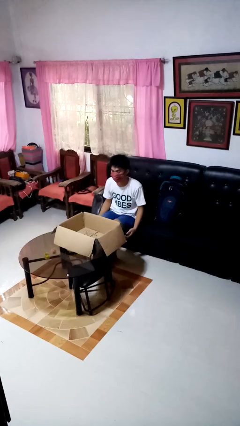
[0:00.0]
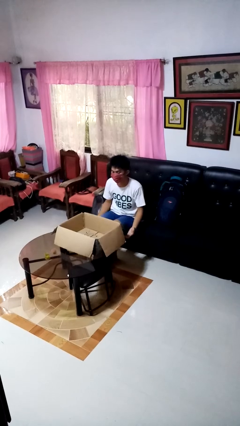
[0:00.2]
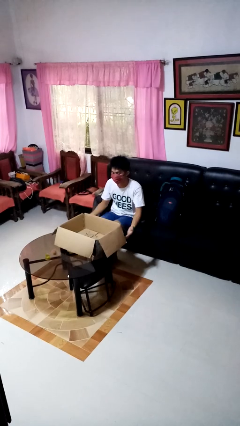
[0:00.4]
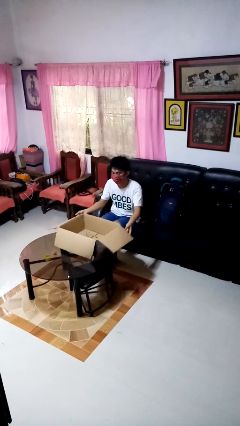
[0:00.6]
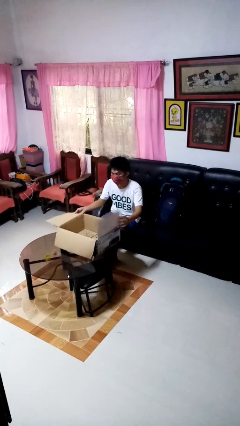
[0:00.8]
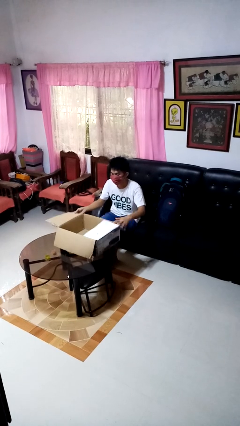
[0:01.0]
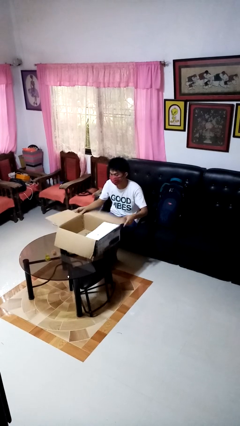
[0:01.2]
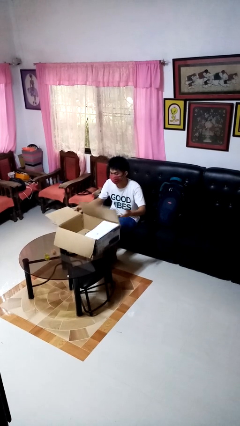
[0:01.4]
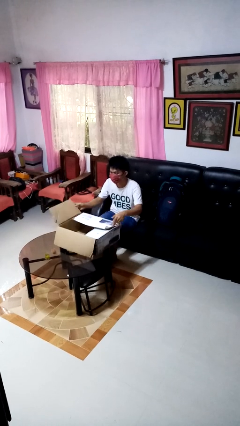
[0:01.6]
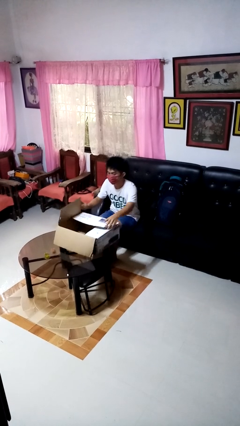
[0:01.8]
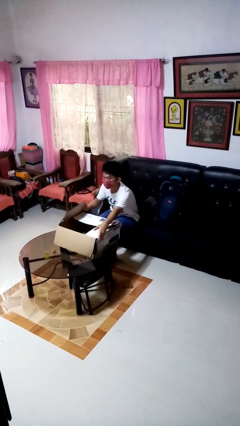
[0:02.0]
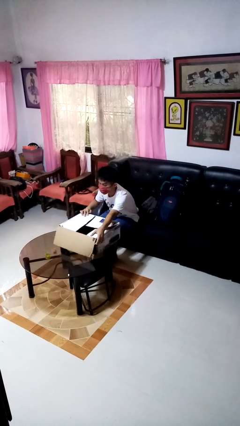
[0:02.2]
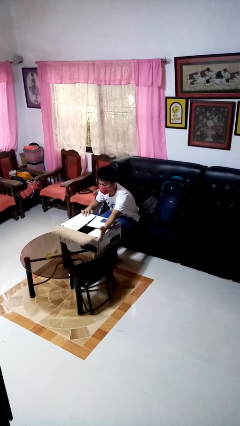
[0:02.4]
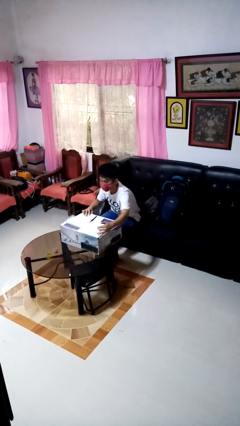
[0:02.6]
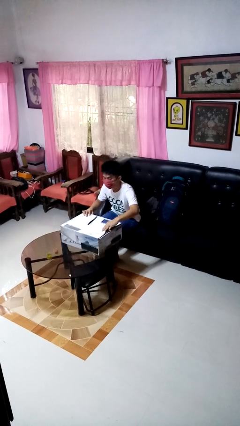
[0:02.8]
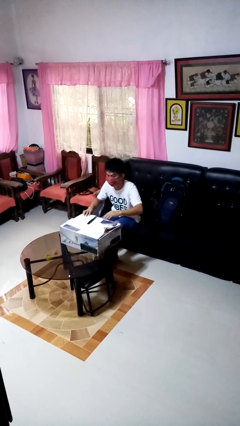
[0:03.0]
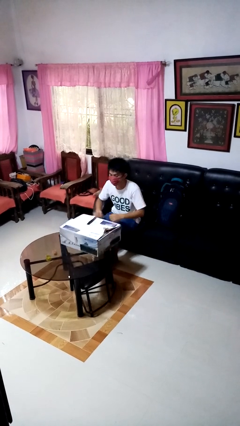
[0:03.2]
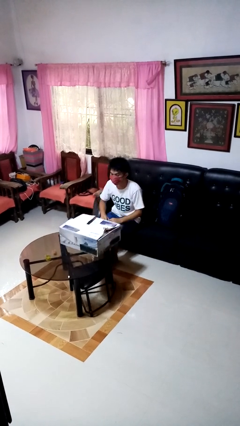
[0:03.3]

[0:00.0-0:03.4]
person closes box

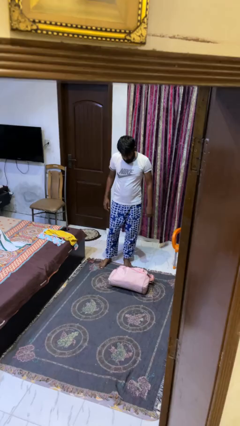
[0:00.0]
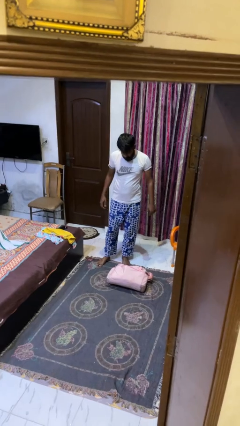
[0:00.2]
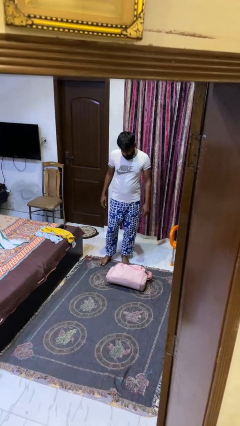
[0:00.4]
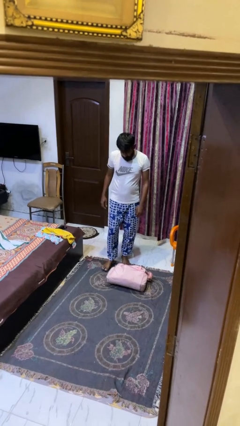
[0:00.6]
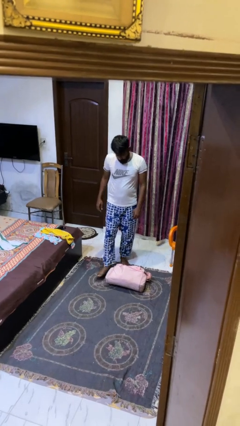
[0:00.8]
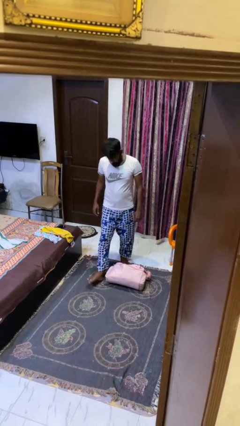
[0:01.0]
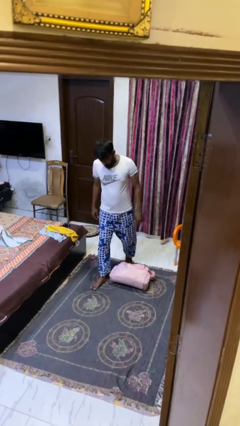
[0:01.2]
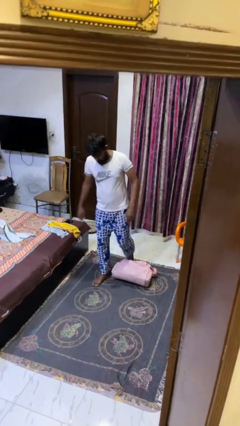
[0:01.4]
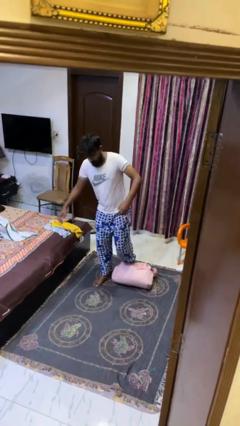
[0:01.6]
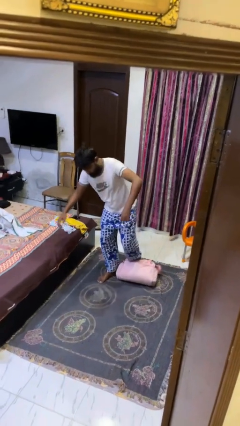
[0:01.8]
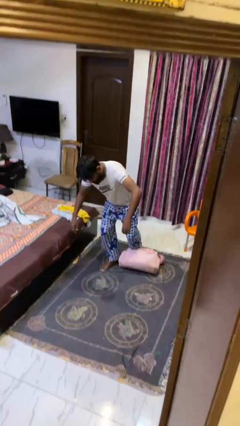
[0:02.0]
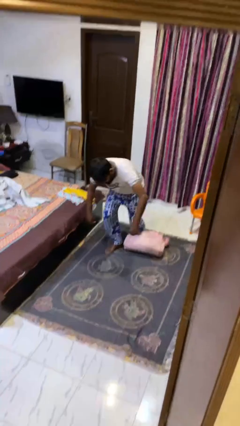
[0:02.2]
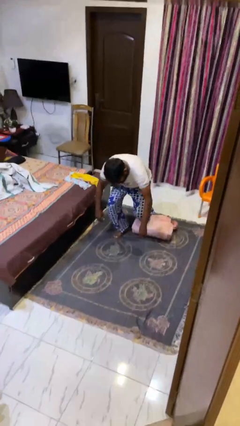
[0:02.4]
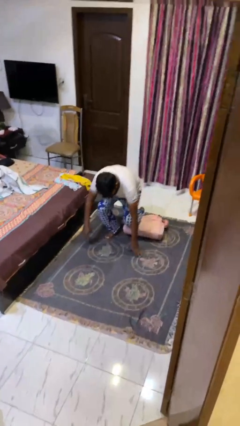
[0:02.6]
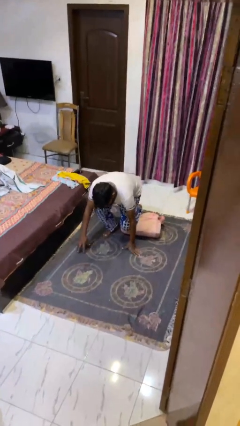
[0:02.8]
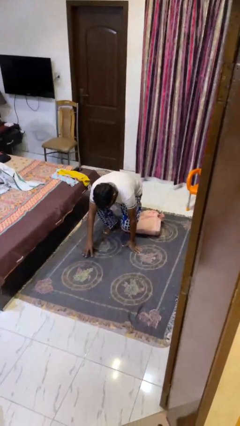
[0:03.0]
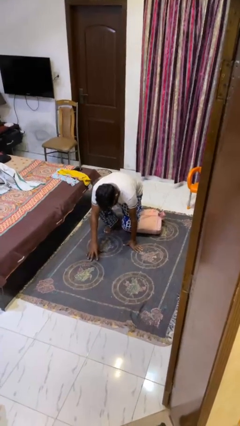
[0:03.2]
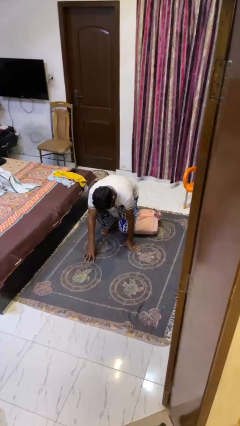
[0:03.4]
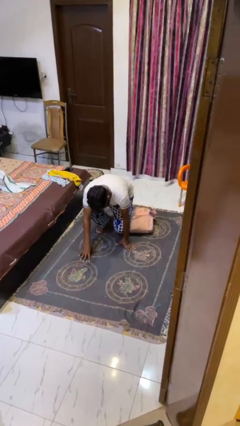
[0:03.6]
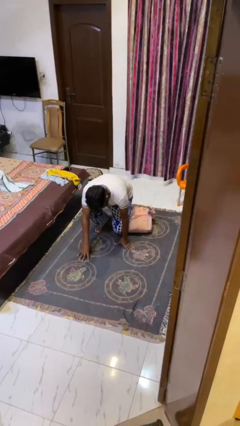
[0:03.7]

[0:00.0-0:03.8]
person trips on object on floor

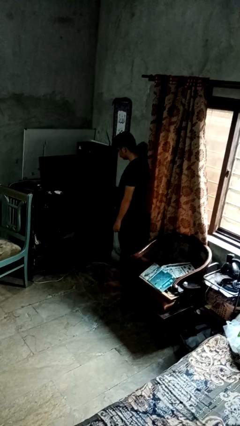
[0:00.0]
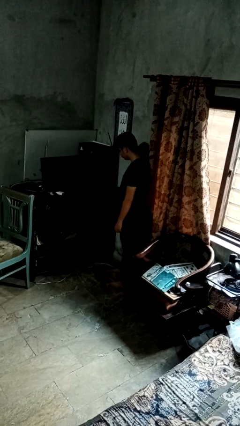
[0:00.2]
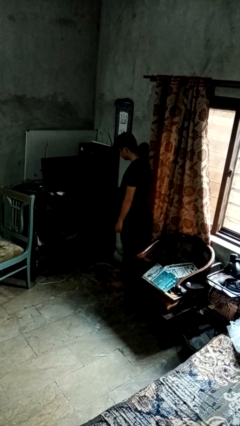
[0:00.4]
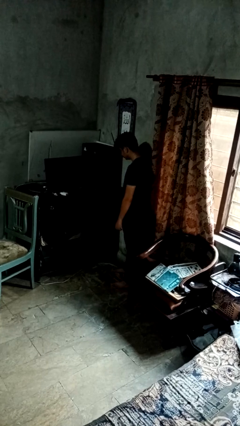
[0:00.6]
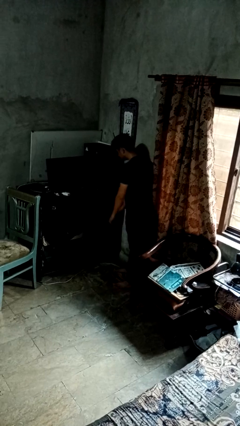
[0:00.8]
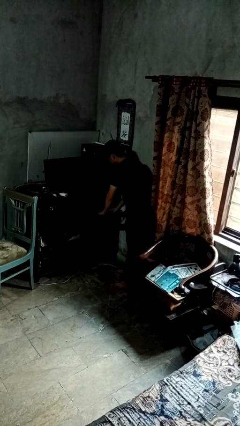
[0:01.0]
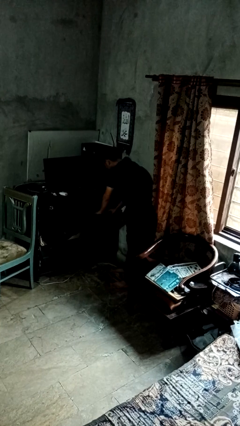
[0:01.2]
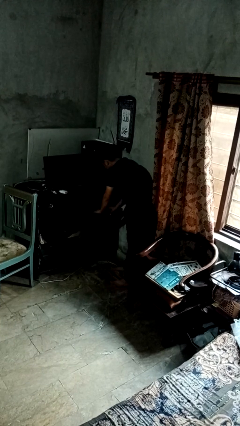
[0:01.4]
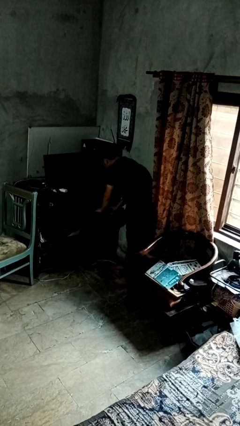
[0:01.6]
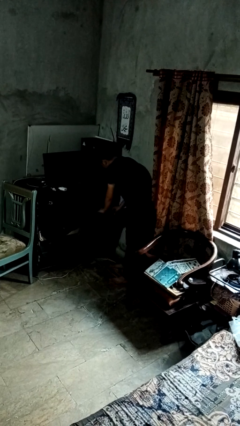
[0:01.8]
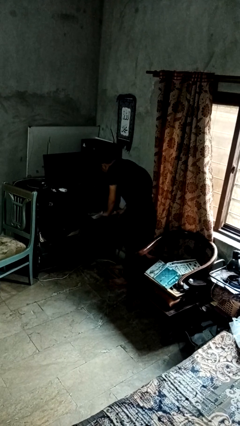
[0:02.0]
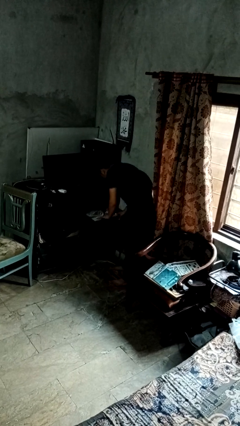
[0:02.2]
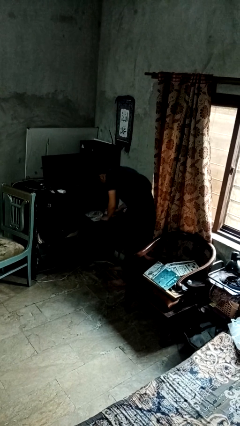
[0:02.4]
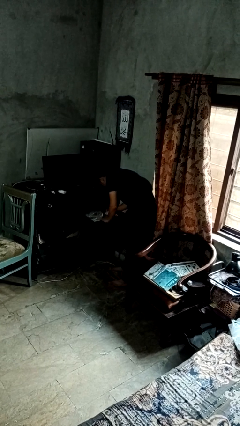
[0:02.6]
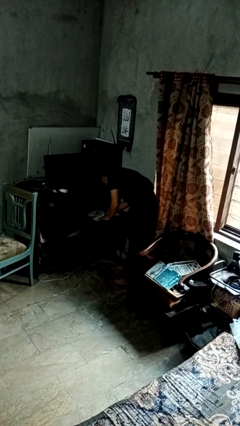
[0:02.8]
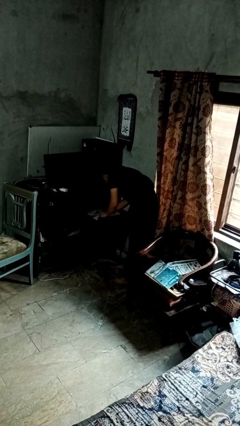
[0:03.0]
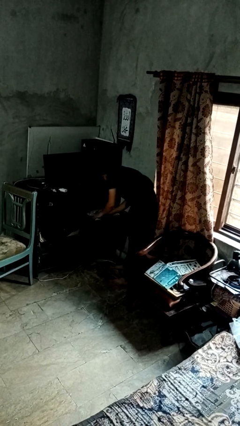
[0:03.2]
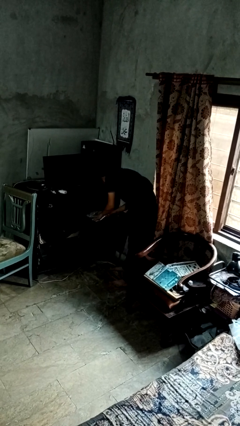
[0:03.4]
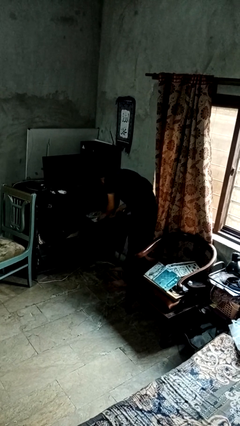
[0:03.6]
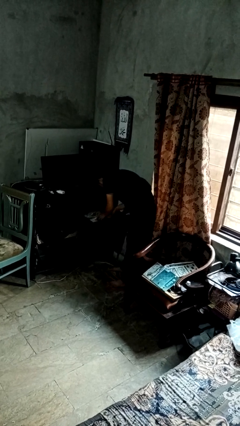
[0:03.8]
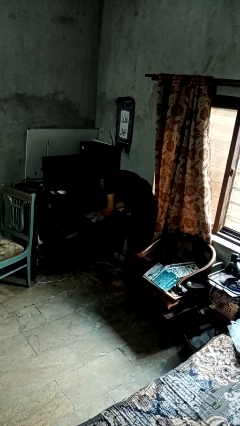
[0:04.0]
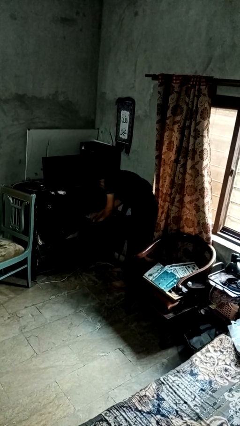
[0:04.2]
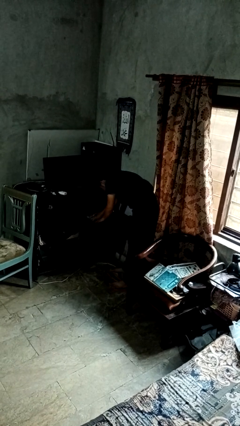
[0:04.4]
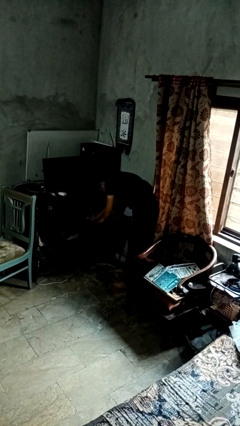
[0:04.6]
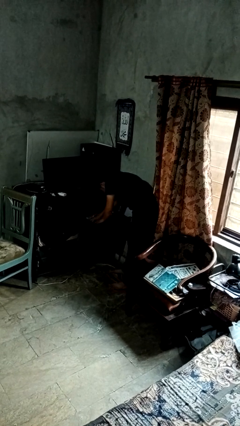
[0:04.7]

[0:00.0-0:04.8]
person searches in cabinet

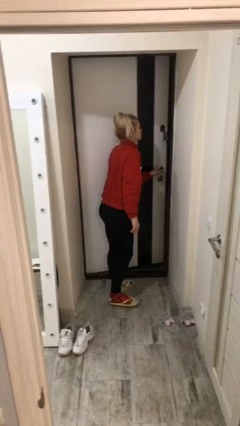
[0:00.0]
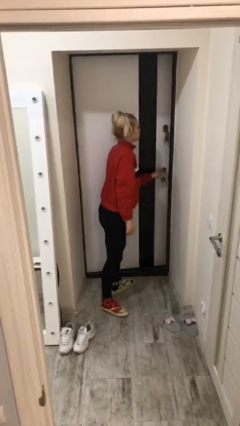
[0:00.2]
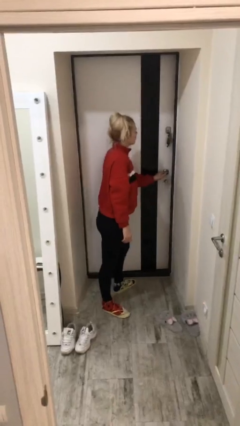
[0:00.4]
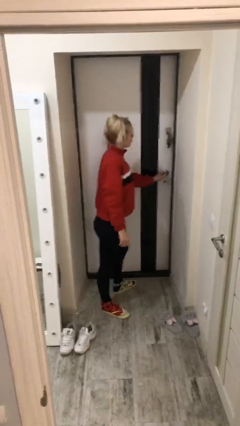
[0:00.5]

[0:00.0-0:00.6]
person closes facility door

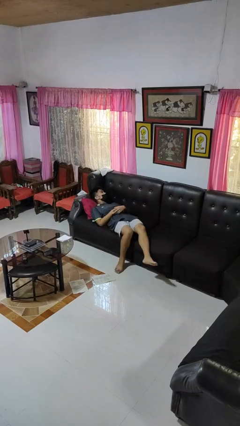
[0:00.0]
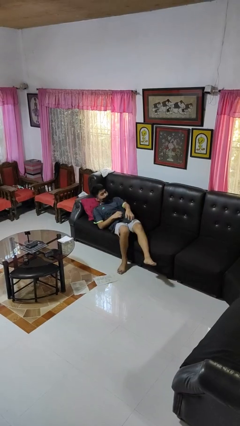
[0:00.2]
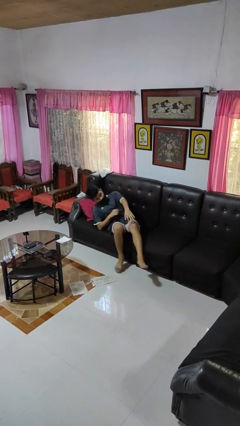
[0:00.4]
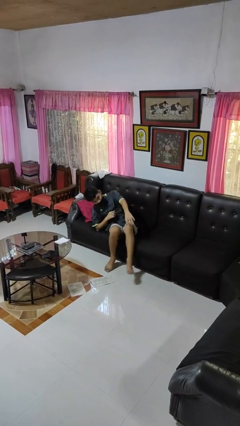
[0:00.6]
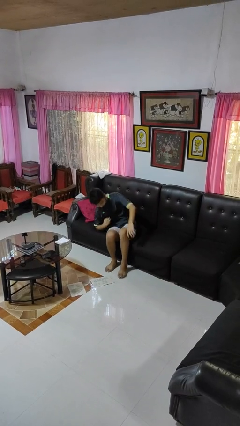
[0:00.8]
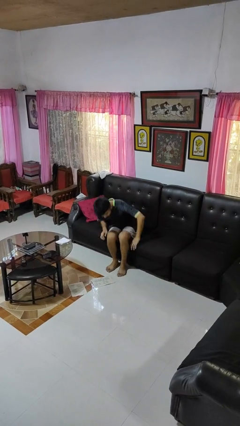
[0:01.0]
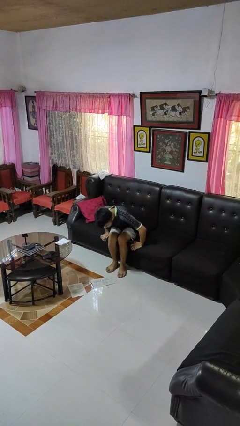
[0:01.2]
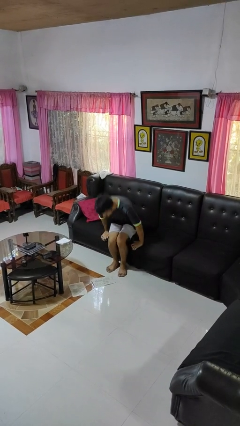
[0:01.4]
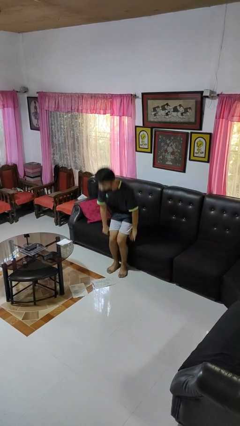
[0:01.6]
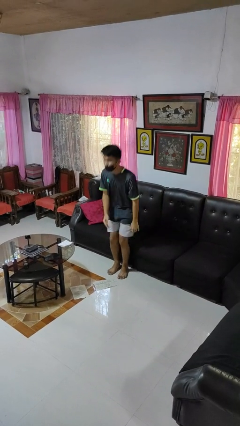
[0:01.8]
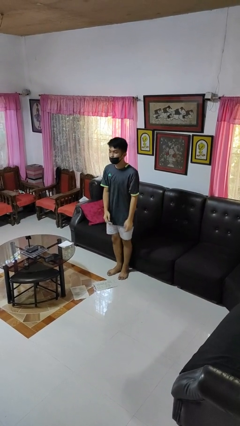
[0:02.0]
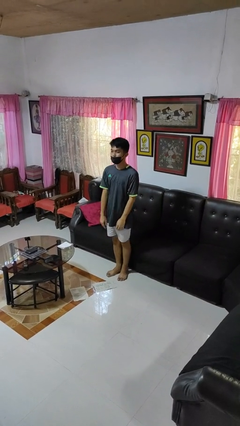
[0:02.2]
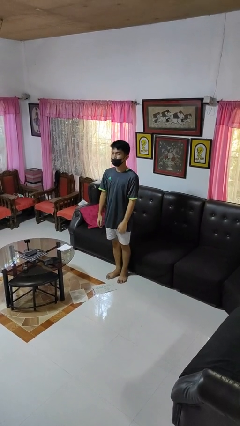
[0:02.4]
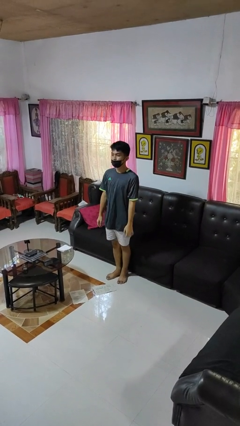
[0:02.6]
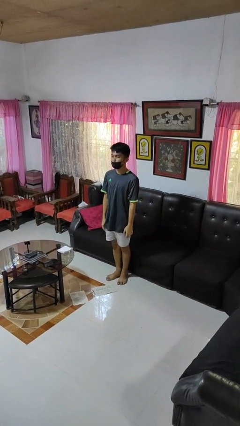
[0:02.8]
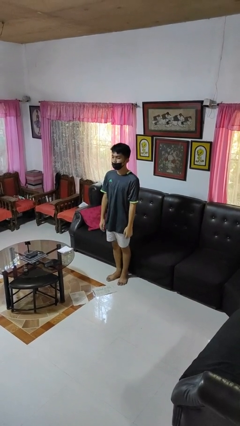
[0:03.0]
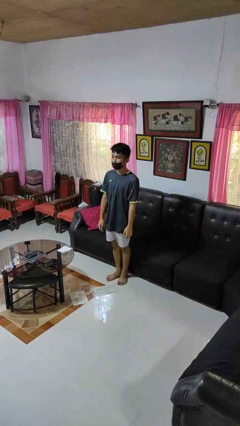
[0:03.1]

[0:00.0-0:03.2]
person stands up

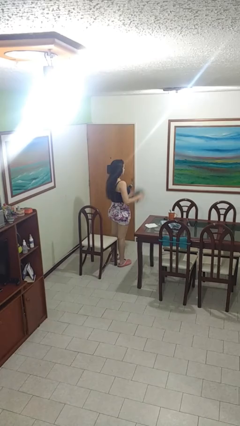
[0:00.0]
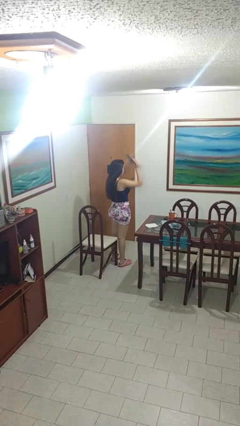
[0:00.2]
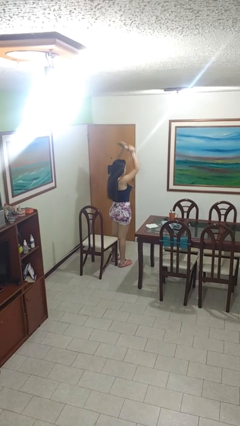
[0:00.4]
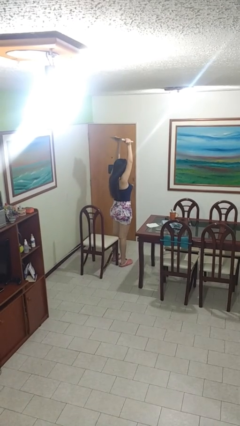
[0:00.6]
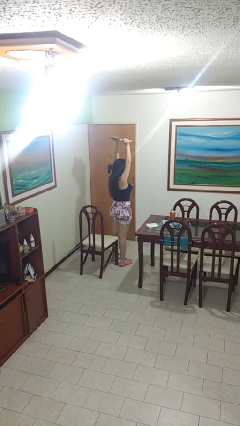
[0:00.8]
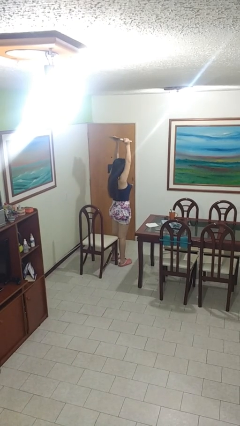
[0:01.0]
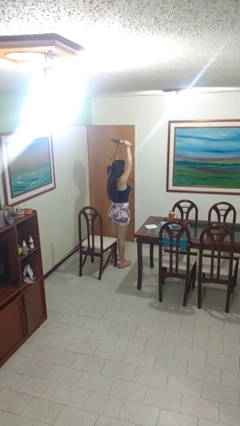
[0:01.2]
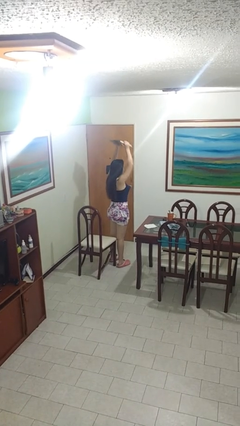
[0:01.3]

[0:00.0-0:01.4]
person holds object above head

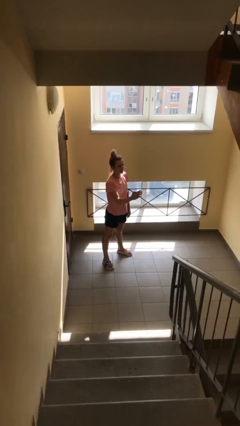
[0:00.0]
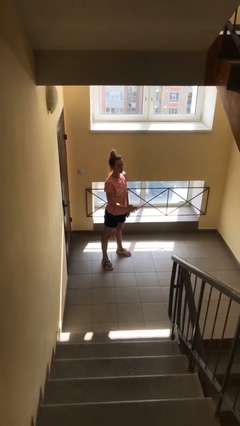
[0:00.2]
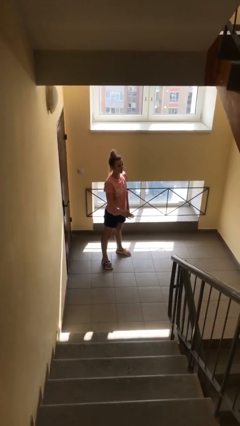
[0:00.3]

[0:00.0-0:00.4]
person gestures lower hand
